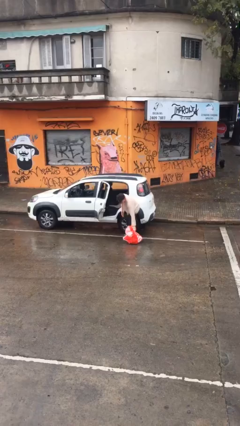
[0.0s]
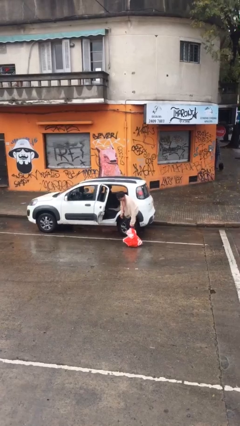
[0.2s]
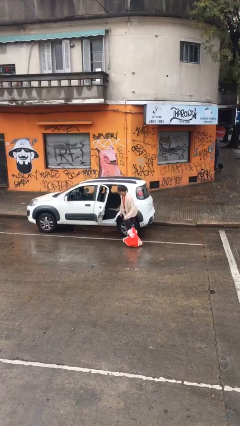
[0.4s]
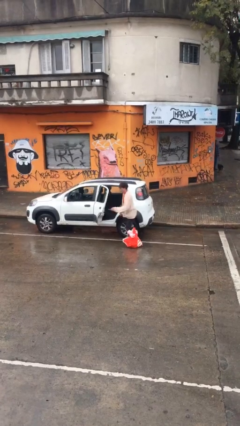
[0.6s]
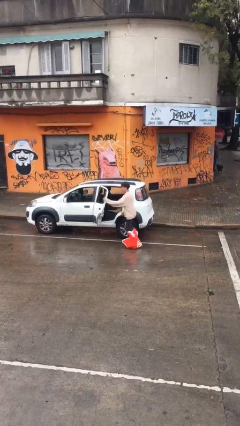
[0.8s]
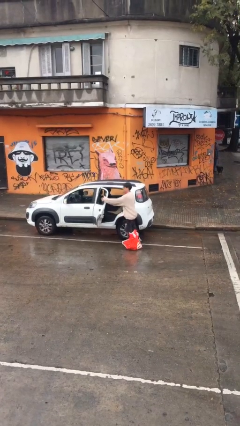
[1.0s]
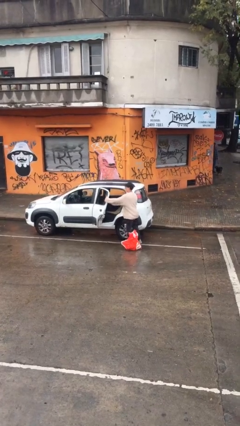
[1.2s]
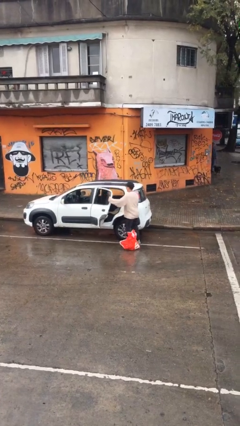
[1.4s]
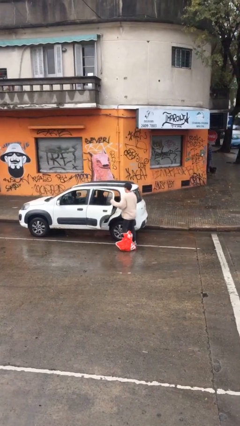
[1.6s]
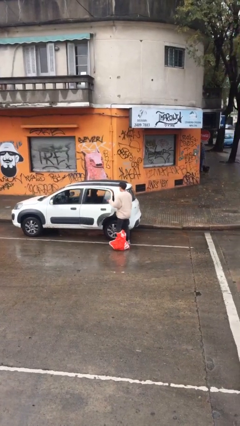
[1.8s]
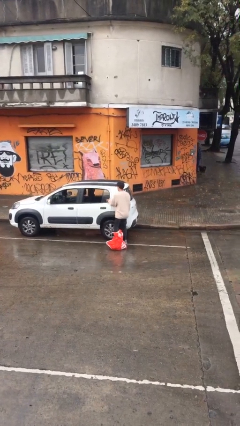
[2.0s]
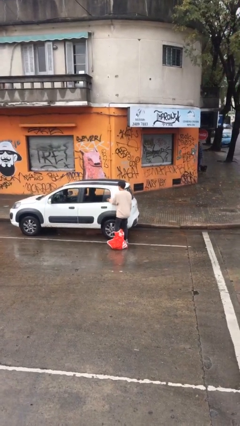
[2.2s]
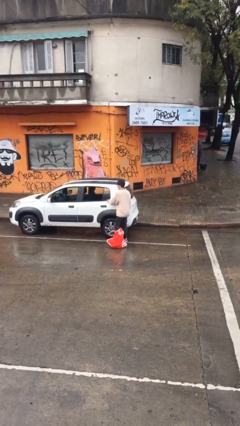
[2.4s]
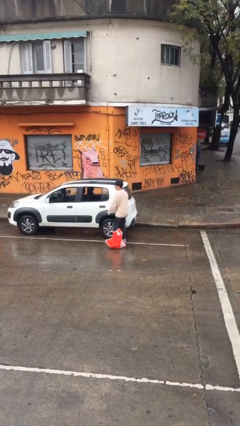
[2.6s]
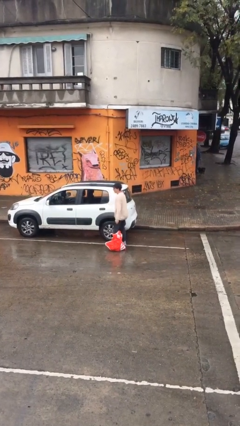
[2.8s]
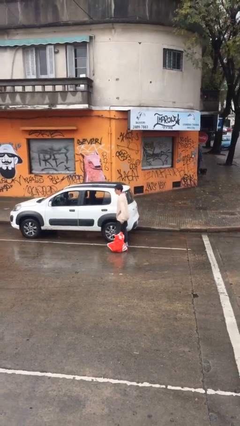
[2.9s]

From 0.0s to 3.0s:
person closes car door

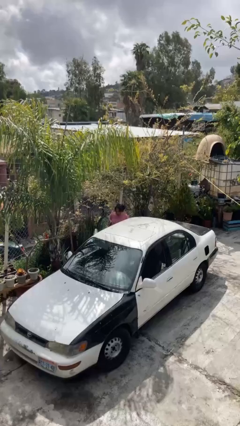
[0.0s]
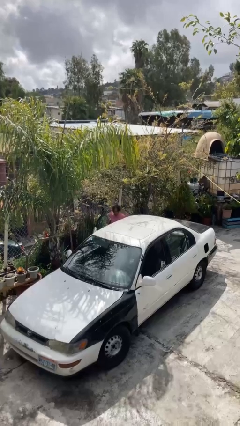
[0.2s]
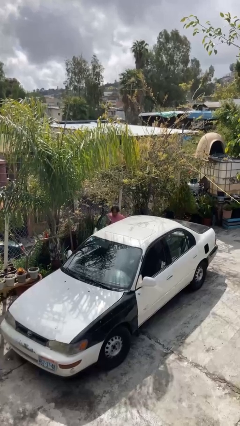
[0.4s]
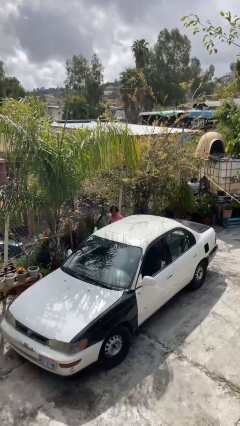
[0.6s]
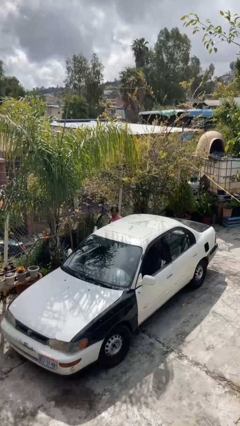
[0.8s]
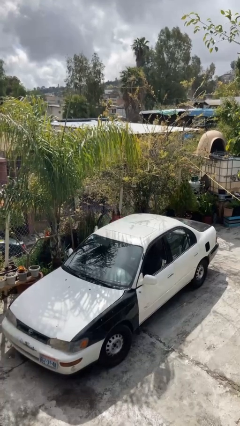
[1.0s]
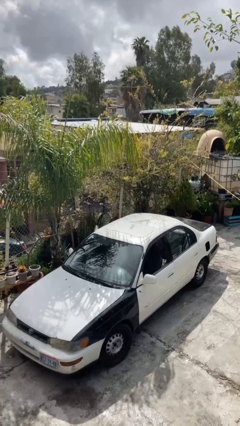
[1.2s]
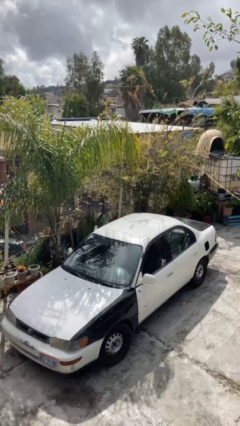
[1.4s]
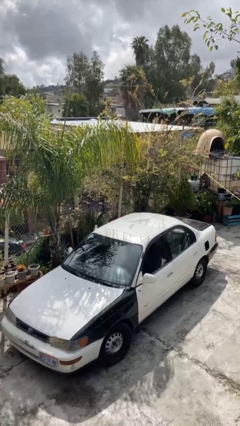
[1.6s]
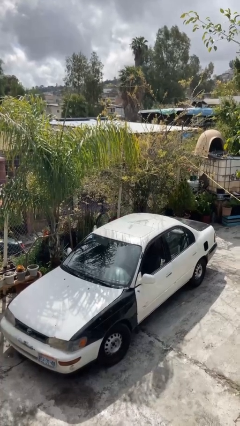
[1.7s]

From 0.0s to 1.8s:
person enters car

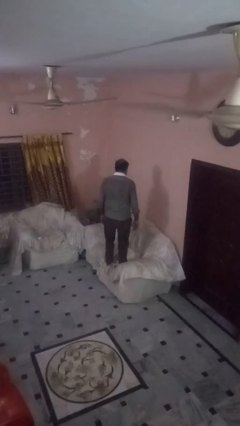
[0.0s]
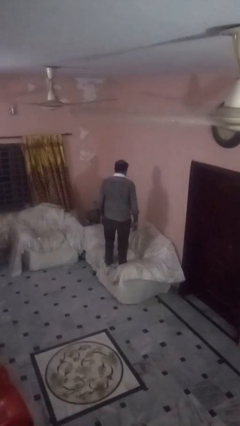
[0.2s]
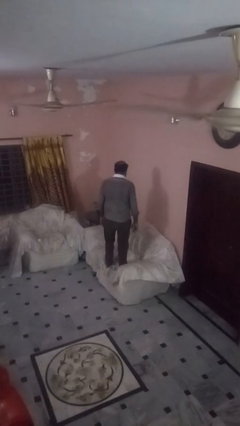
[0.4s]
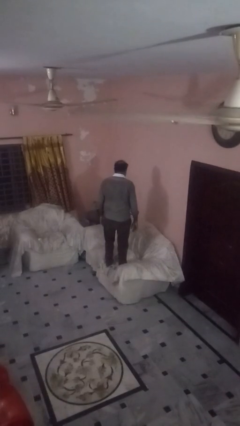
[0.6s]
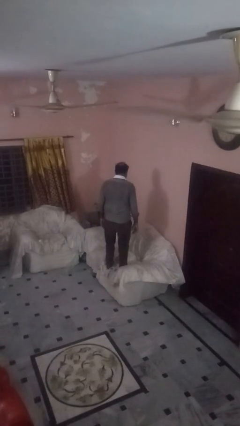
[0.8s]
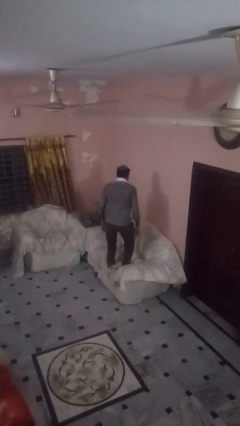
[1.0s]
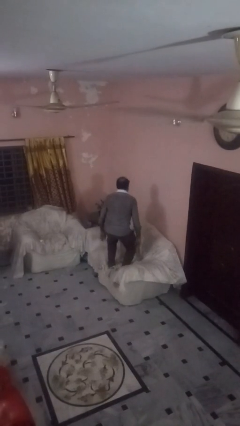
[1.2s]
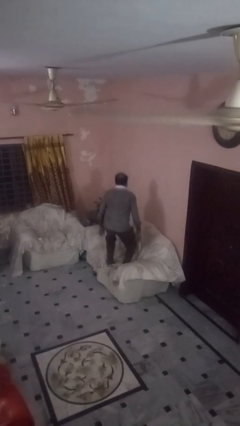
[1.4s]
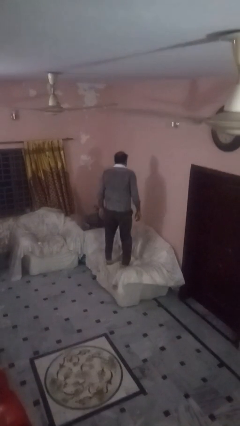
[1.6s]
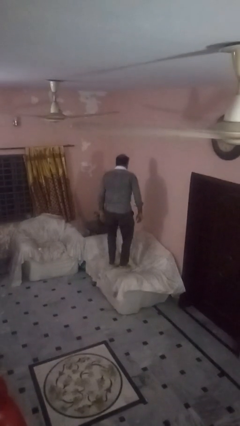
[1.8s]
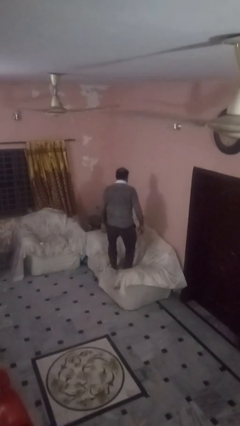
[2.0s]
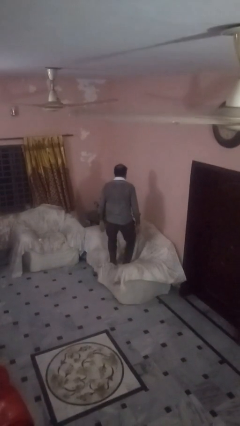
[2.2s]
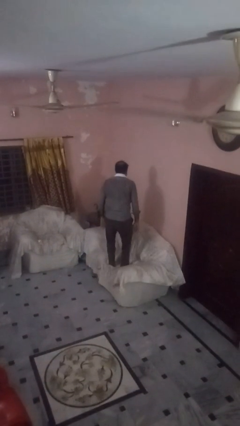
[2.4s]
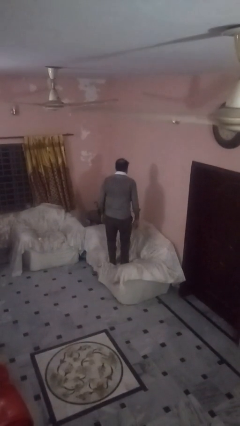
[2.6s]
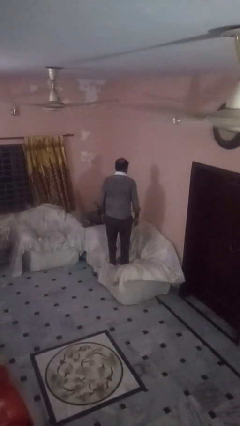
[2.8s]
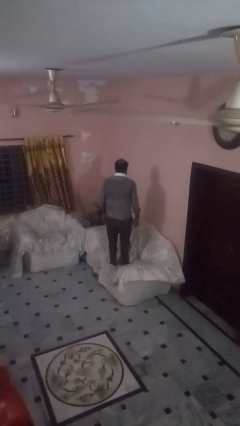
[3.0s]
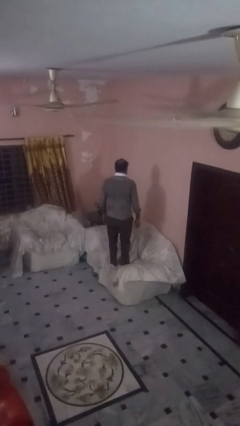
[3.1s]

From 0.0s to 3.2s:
person jumps on couch

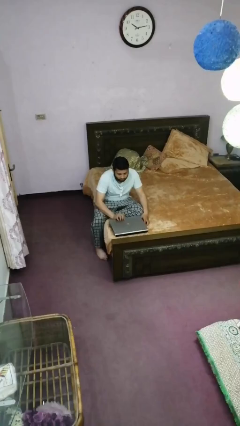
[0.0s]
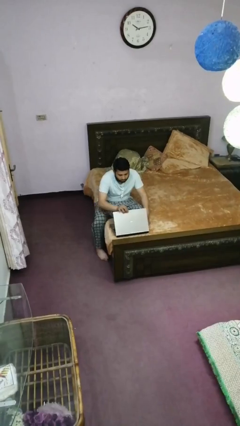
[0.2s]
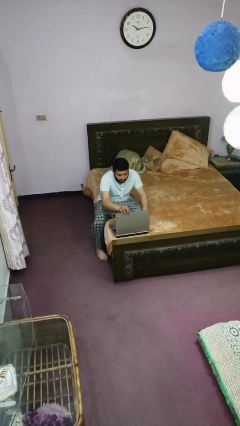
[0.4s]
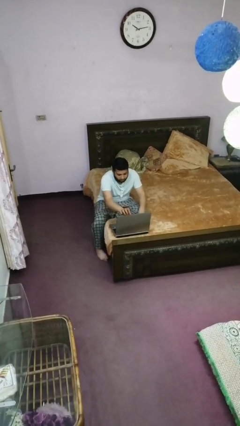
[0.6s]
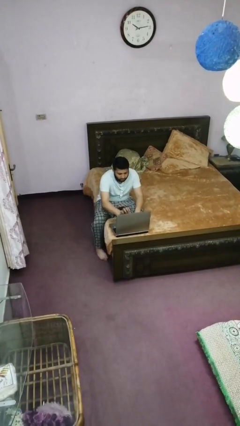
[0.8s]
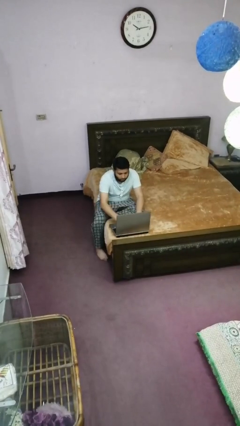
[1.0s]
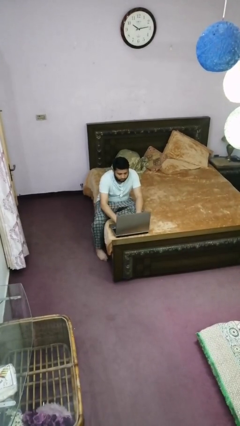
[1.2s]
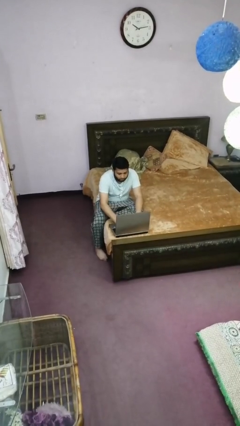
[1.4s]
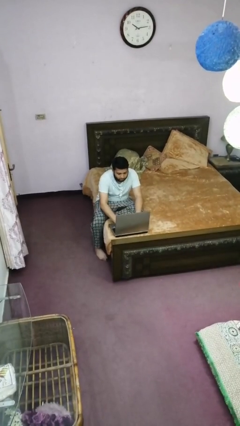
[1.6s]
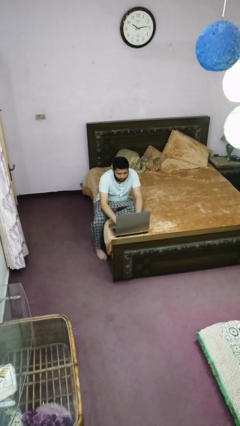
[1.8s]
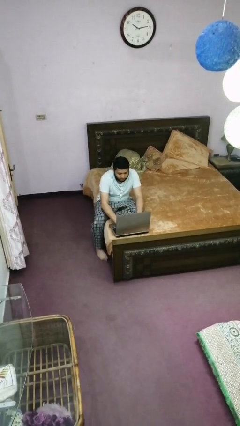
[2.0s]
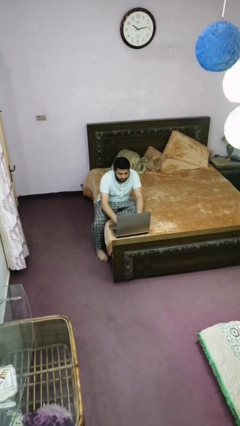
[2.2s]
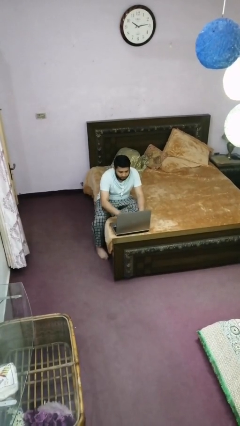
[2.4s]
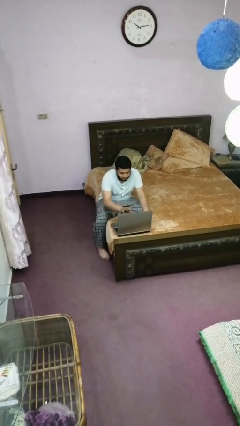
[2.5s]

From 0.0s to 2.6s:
person interacts with laptop

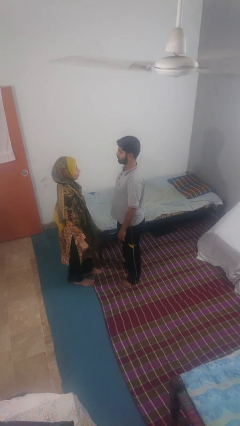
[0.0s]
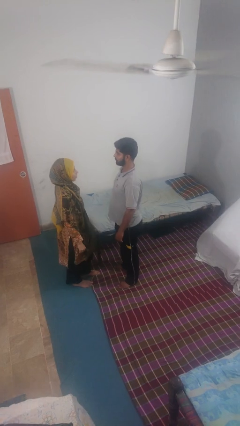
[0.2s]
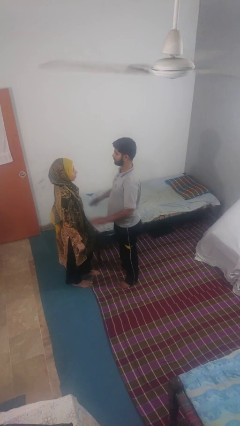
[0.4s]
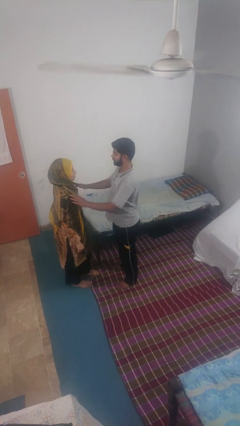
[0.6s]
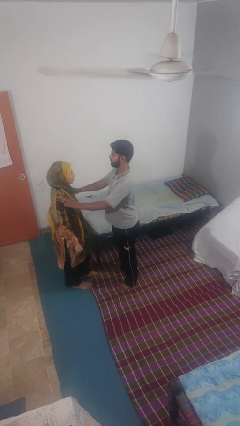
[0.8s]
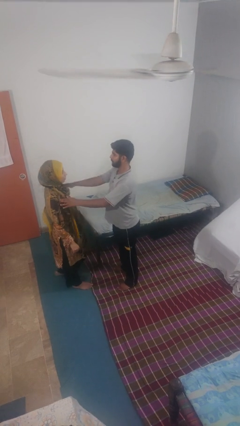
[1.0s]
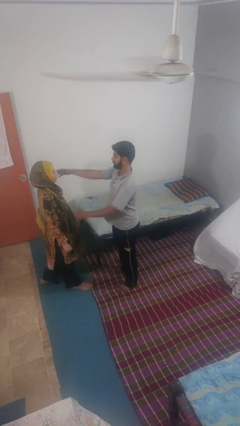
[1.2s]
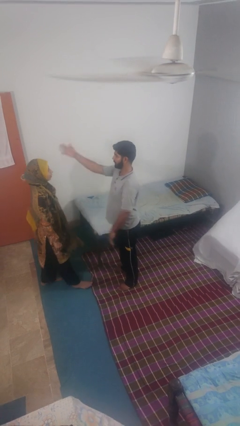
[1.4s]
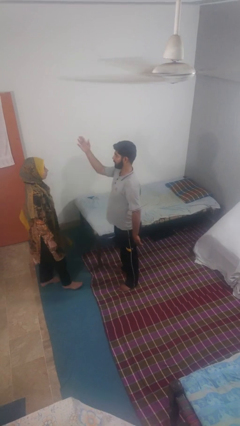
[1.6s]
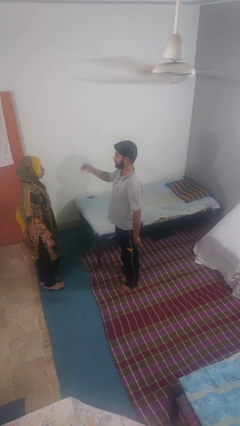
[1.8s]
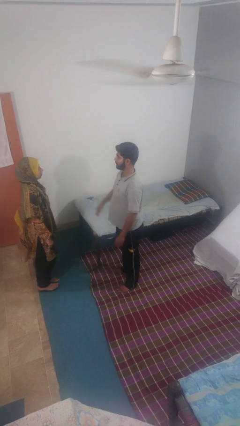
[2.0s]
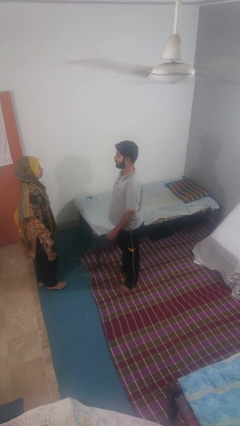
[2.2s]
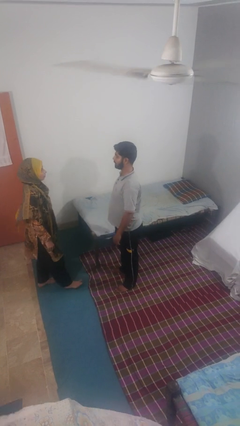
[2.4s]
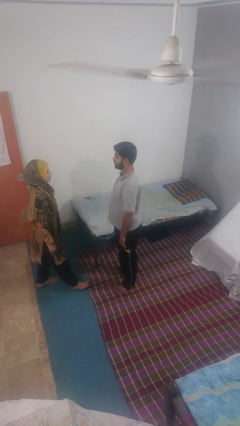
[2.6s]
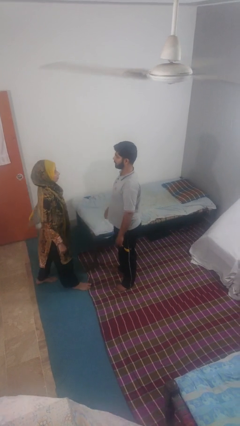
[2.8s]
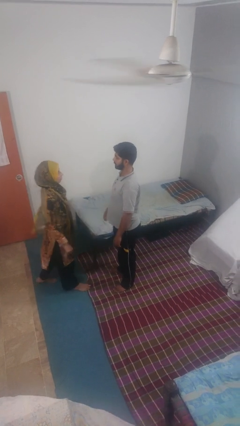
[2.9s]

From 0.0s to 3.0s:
person shoves person

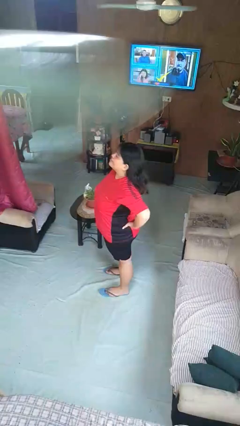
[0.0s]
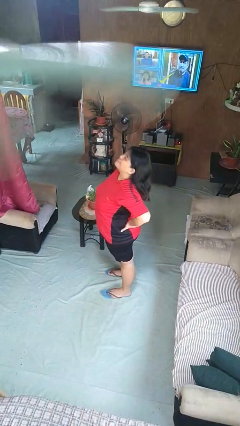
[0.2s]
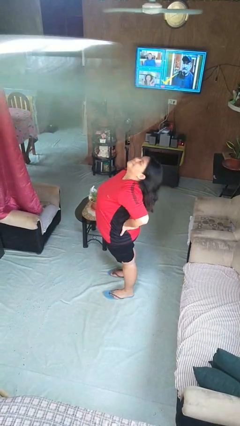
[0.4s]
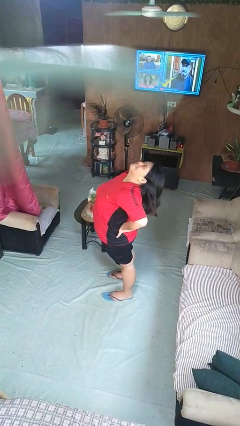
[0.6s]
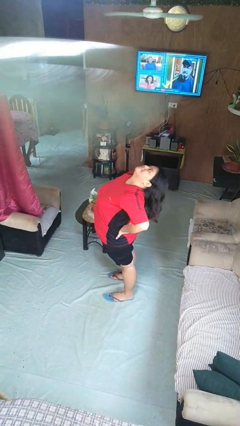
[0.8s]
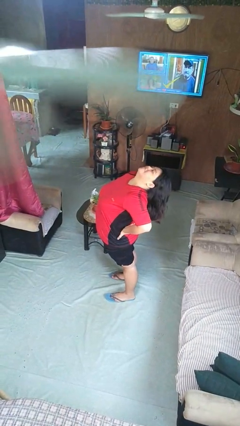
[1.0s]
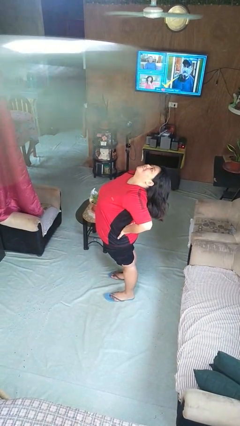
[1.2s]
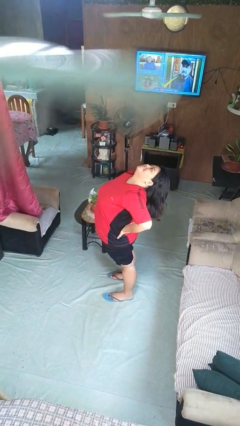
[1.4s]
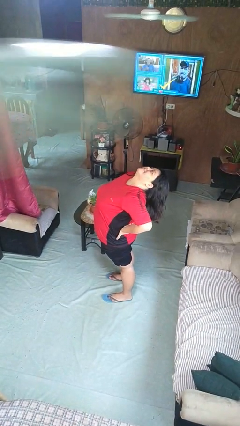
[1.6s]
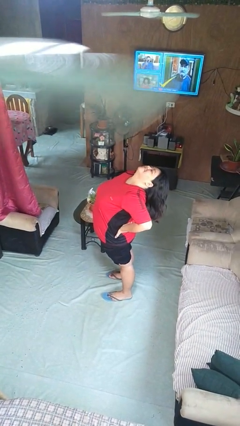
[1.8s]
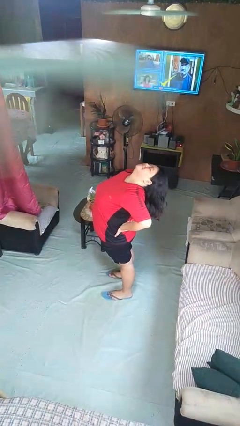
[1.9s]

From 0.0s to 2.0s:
person stretches back

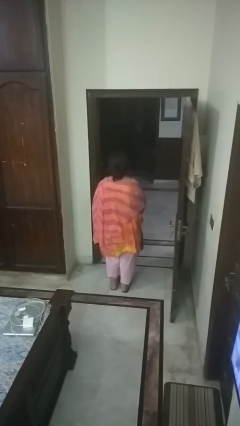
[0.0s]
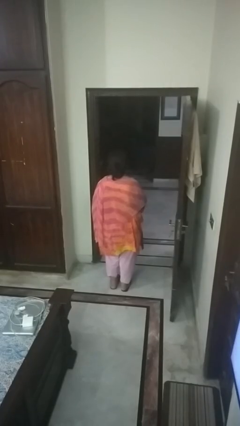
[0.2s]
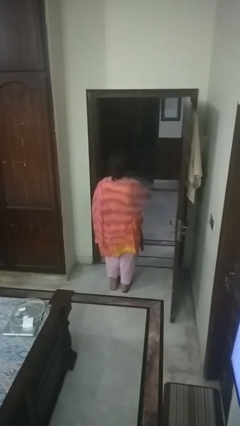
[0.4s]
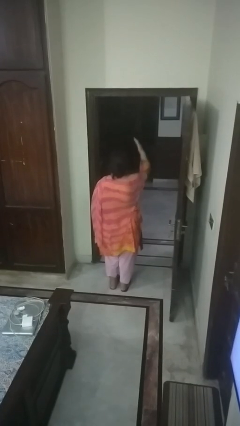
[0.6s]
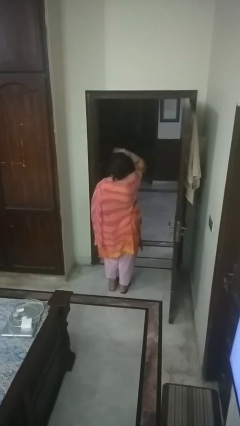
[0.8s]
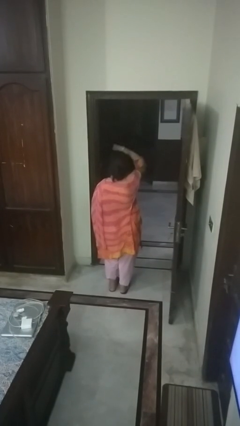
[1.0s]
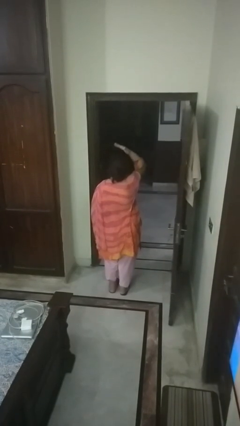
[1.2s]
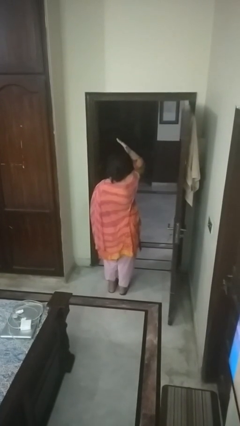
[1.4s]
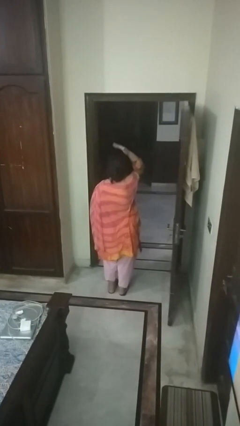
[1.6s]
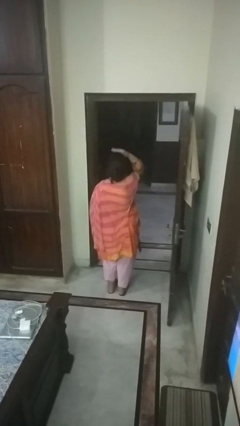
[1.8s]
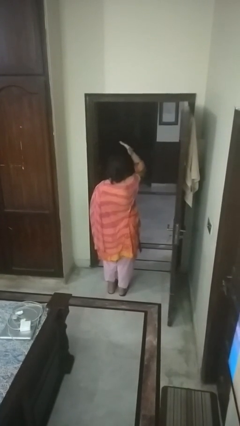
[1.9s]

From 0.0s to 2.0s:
person pats head
